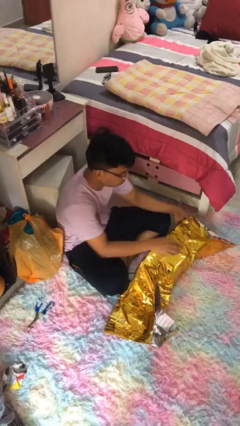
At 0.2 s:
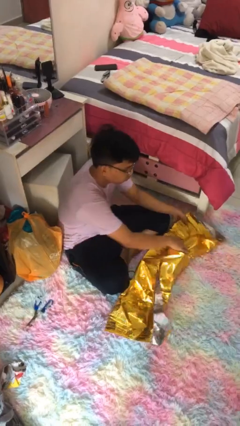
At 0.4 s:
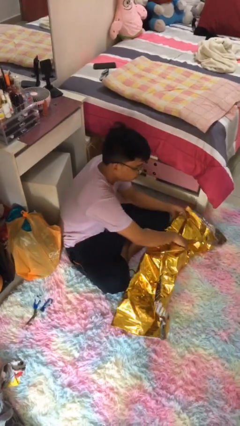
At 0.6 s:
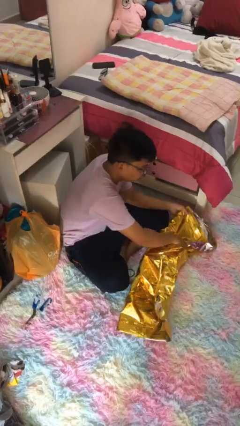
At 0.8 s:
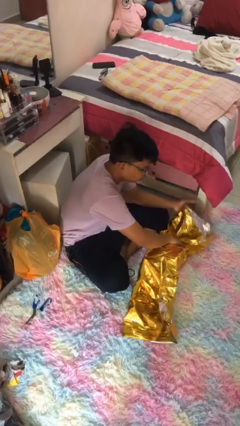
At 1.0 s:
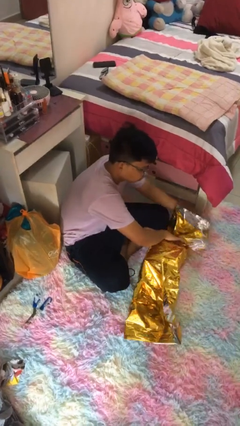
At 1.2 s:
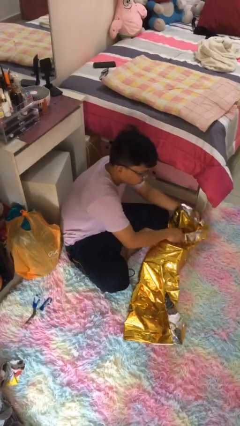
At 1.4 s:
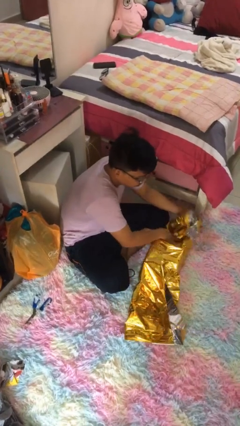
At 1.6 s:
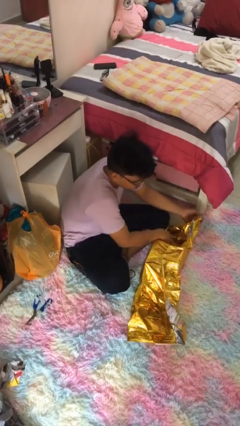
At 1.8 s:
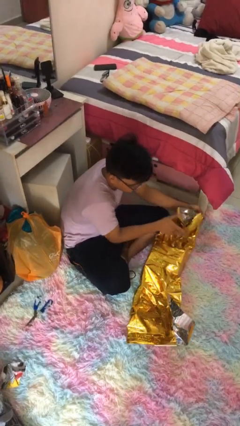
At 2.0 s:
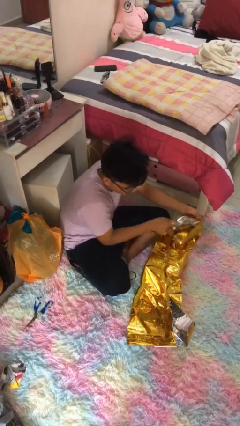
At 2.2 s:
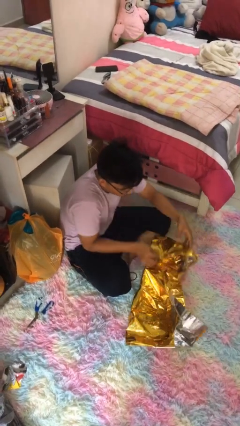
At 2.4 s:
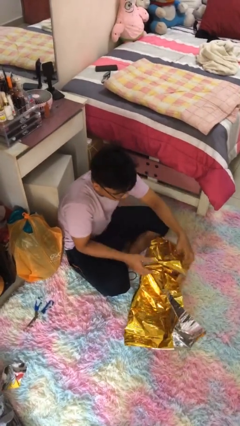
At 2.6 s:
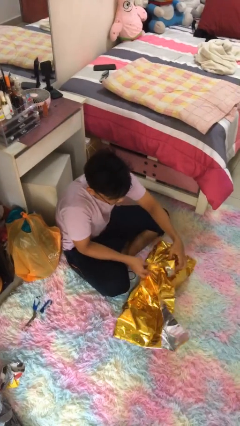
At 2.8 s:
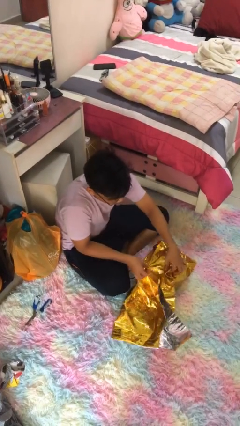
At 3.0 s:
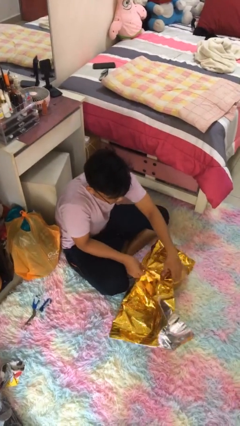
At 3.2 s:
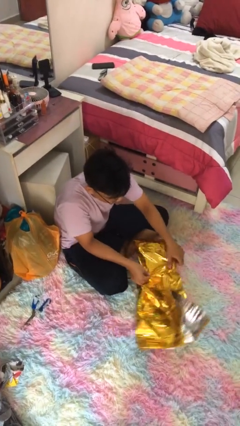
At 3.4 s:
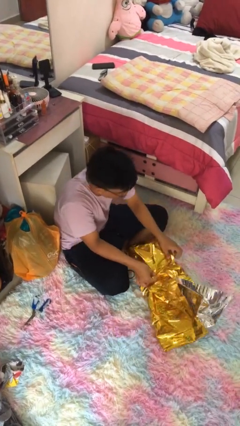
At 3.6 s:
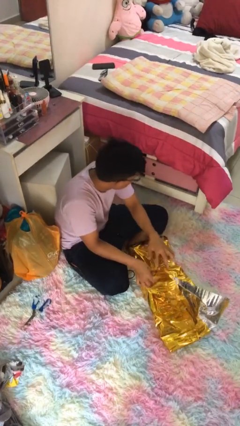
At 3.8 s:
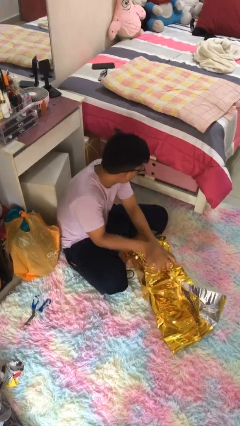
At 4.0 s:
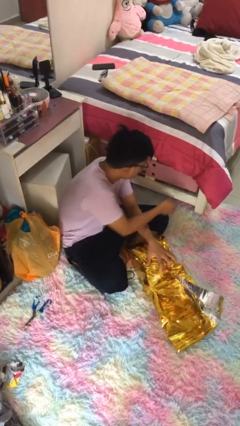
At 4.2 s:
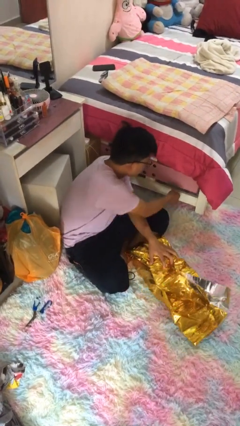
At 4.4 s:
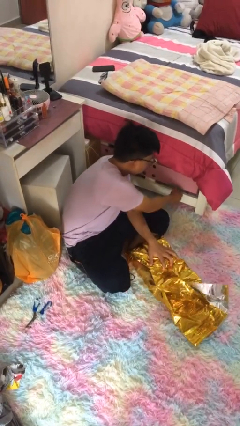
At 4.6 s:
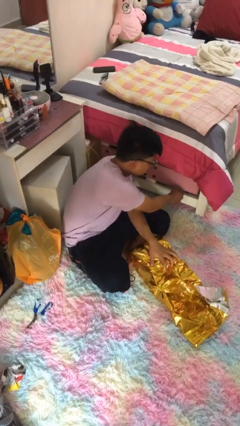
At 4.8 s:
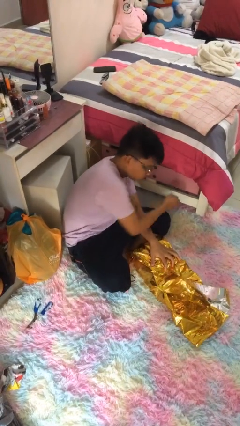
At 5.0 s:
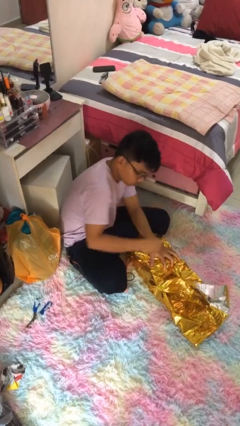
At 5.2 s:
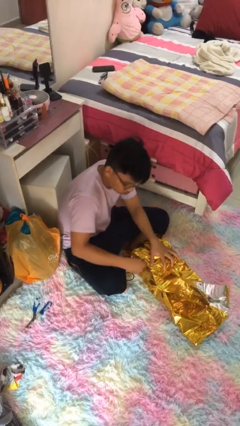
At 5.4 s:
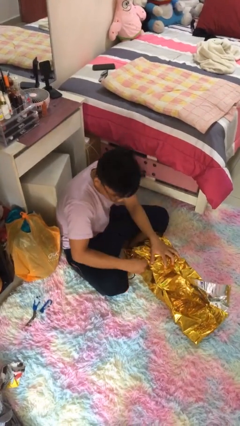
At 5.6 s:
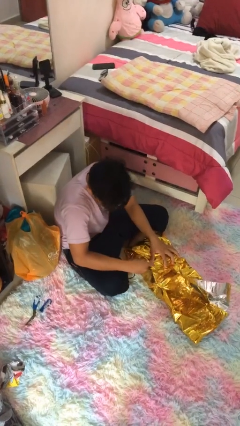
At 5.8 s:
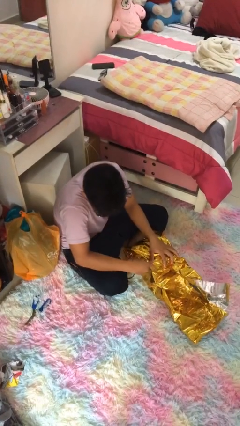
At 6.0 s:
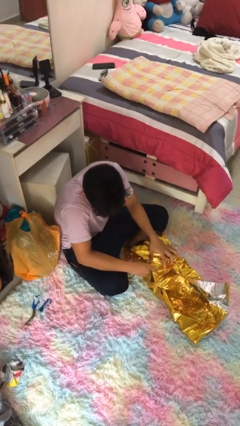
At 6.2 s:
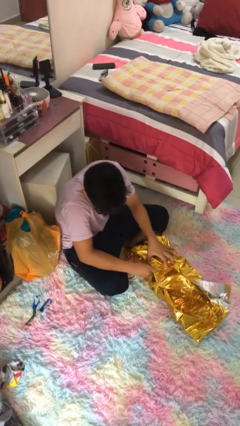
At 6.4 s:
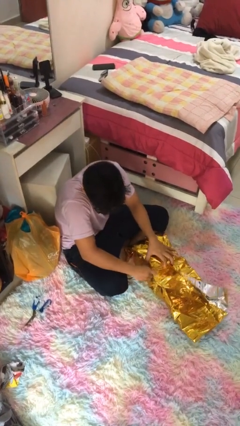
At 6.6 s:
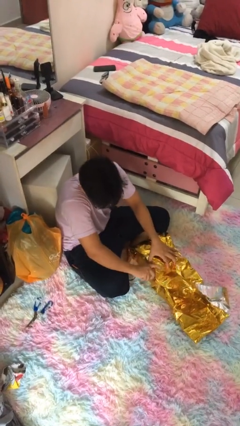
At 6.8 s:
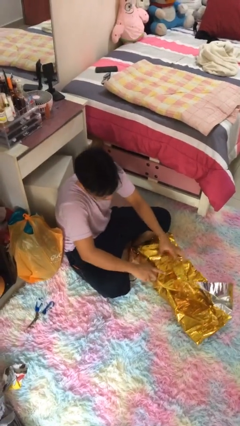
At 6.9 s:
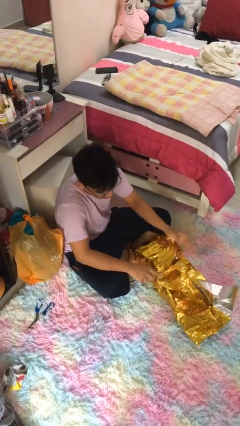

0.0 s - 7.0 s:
person wraps box

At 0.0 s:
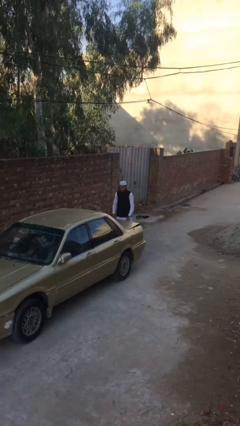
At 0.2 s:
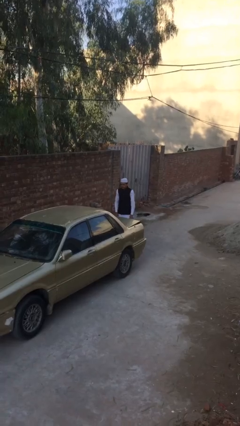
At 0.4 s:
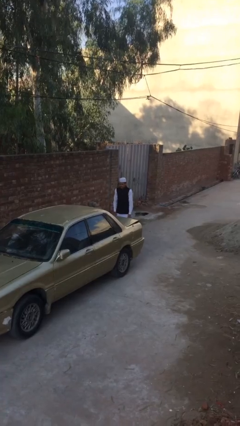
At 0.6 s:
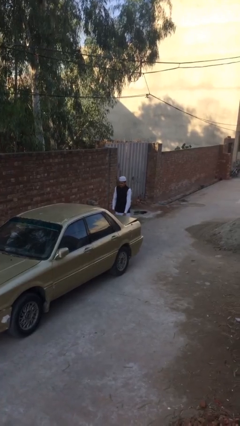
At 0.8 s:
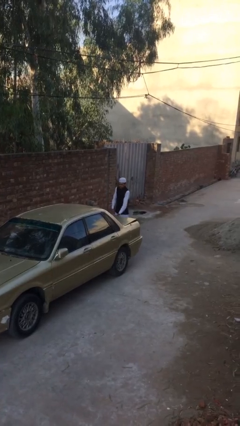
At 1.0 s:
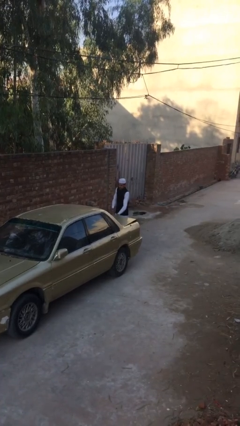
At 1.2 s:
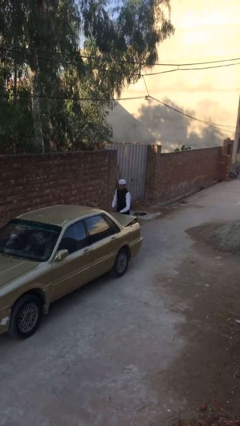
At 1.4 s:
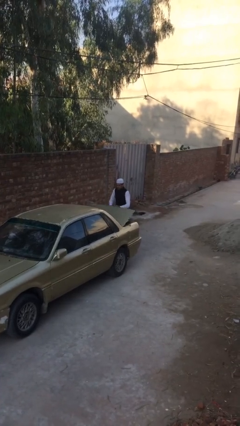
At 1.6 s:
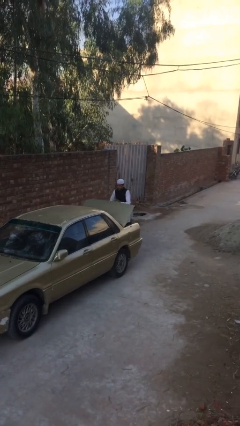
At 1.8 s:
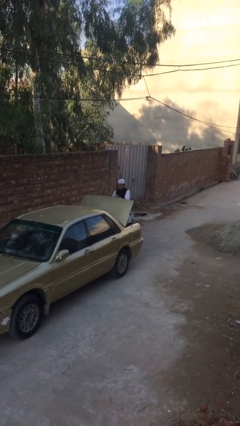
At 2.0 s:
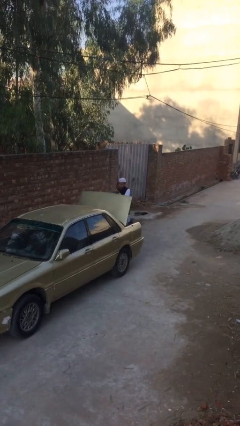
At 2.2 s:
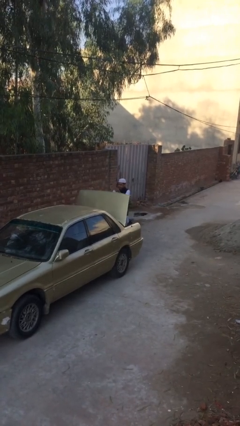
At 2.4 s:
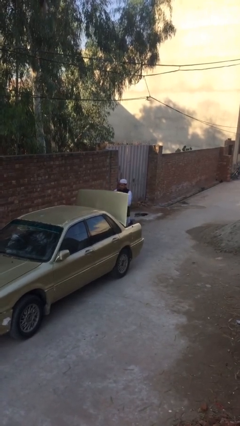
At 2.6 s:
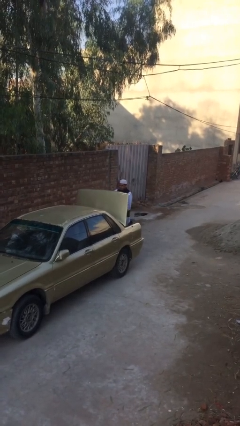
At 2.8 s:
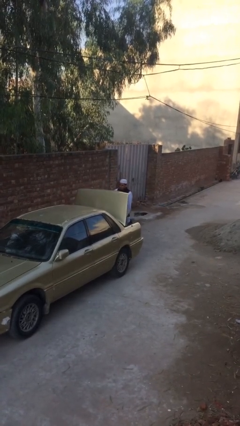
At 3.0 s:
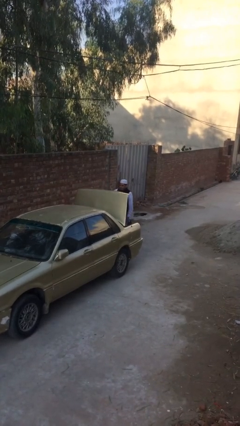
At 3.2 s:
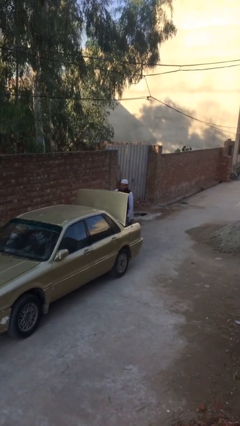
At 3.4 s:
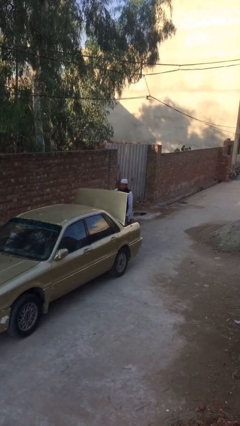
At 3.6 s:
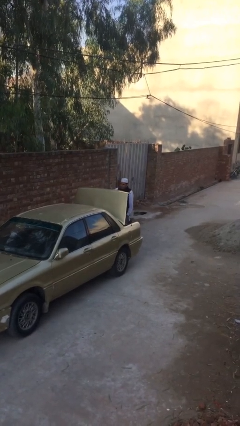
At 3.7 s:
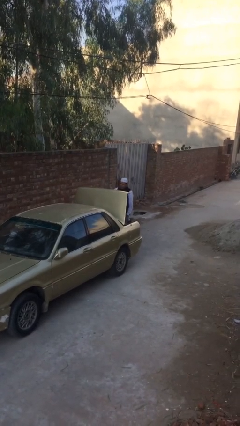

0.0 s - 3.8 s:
person opens car trunk

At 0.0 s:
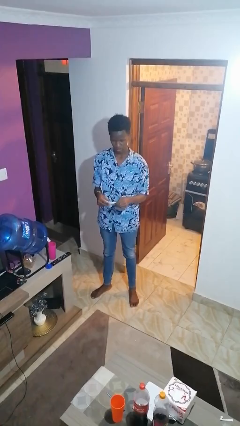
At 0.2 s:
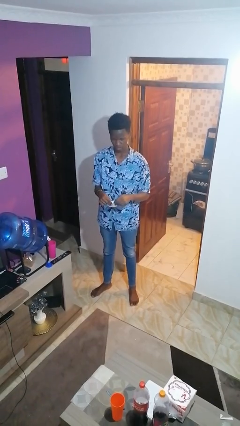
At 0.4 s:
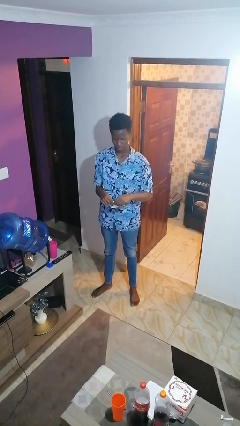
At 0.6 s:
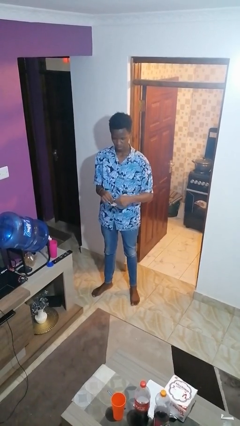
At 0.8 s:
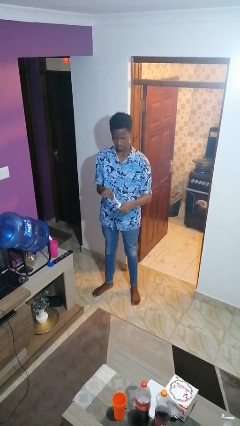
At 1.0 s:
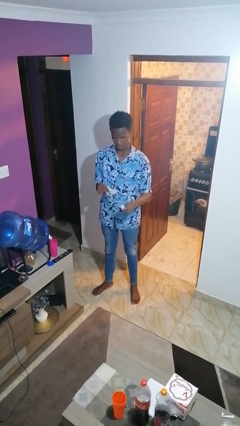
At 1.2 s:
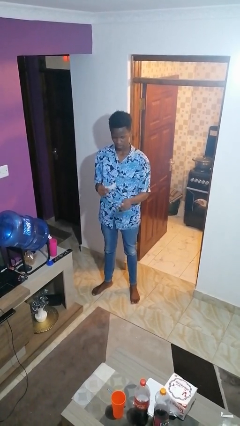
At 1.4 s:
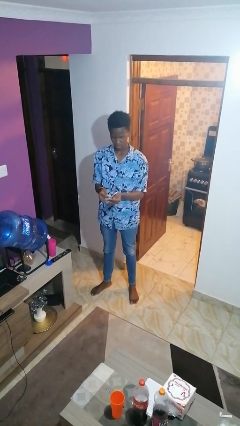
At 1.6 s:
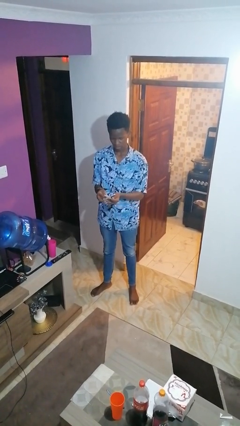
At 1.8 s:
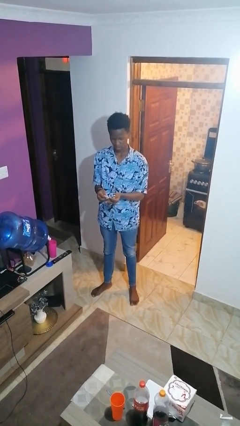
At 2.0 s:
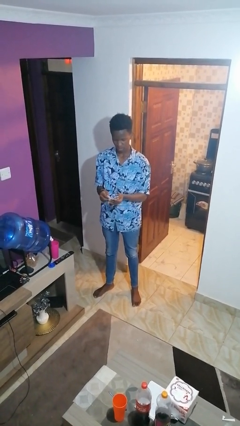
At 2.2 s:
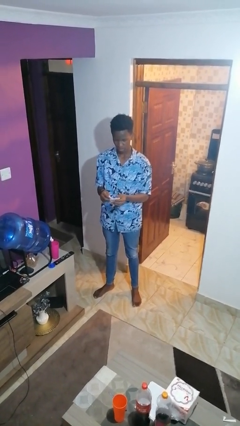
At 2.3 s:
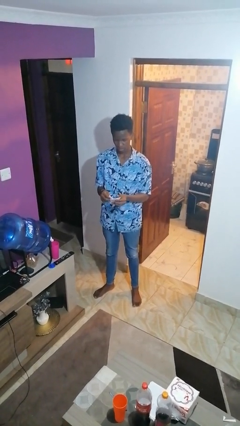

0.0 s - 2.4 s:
person tears paper

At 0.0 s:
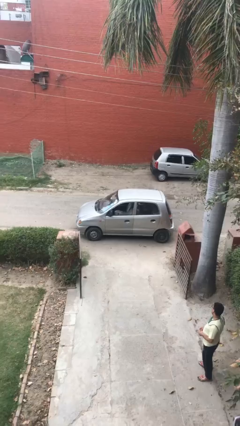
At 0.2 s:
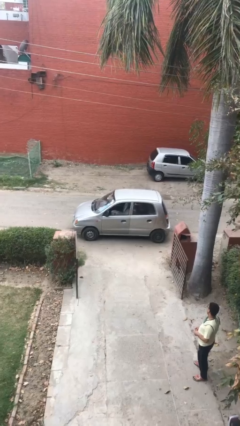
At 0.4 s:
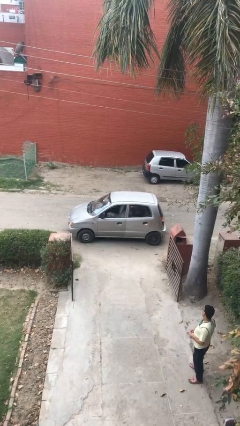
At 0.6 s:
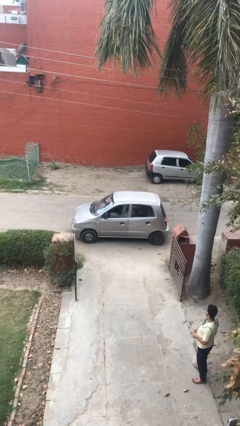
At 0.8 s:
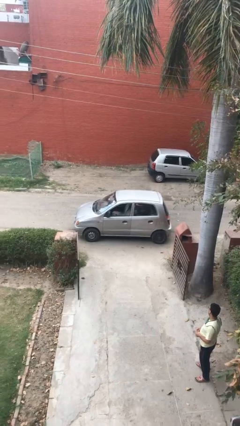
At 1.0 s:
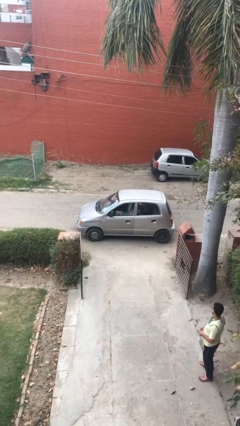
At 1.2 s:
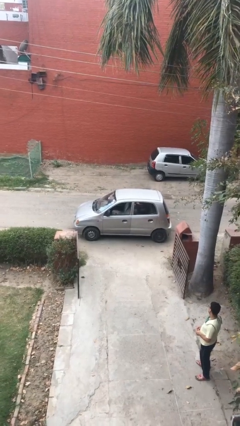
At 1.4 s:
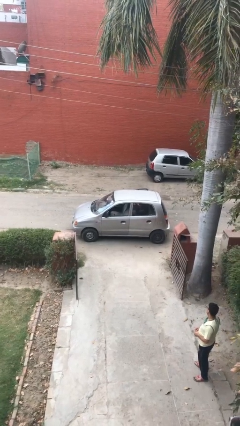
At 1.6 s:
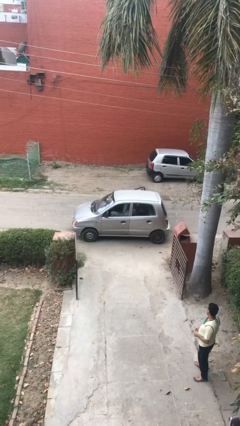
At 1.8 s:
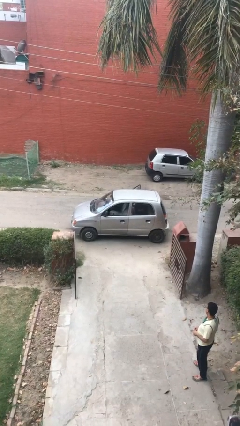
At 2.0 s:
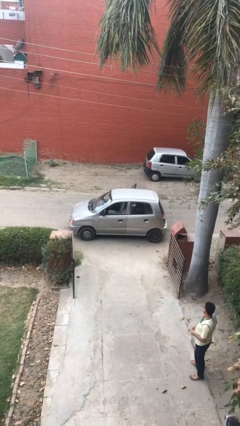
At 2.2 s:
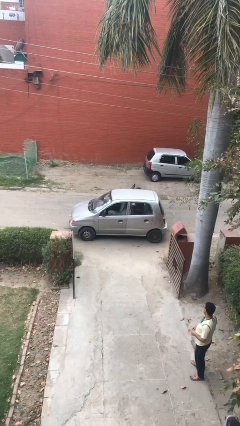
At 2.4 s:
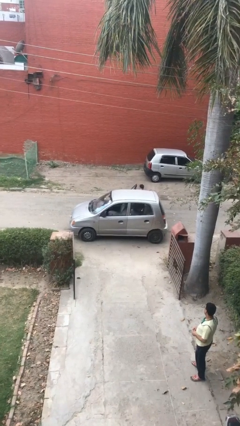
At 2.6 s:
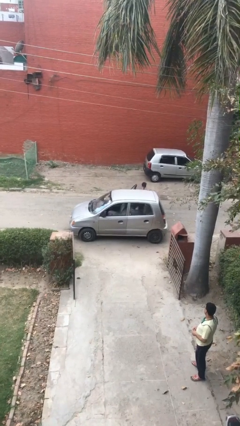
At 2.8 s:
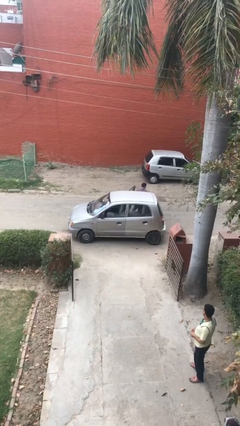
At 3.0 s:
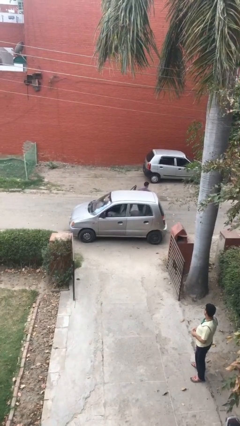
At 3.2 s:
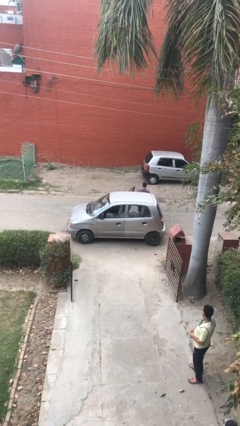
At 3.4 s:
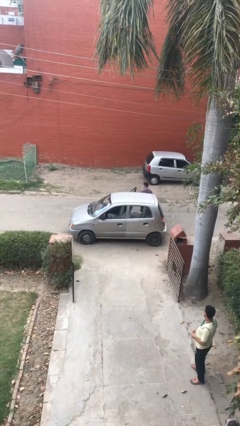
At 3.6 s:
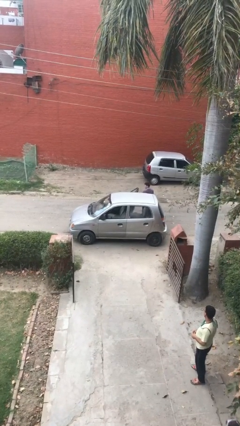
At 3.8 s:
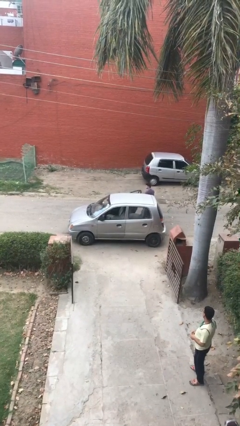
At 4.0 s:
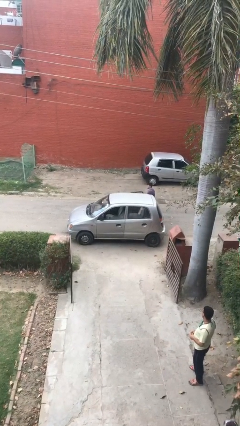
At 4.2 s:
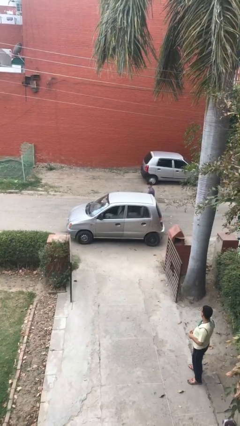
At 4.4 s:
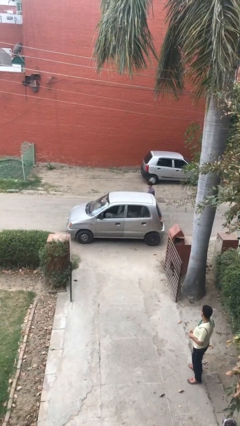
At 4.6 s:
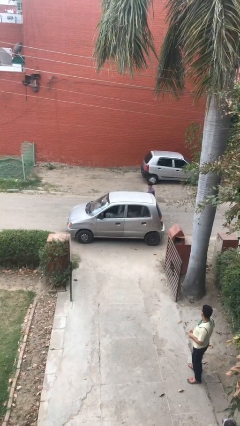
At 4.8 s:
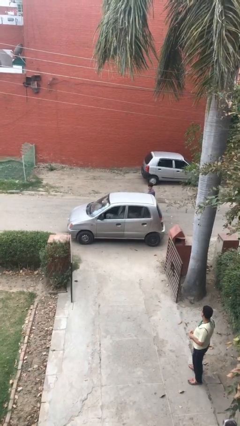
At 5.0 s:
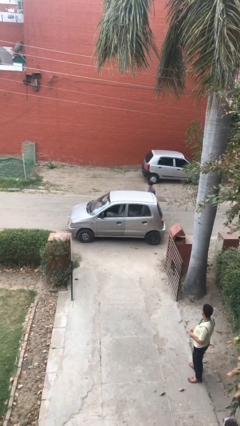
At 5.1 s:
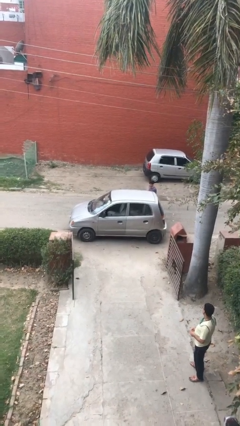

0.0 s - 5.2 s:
car drops off person
